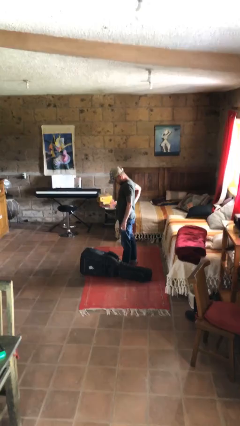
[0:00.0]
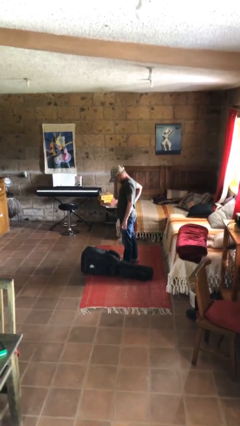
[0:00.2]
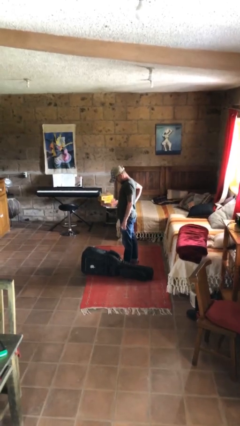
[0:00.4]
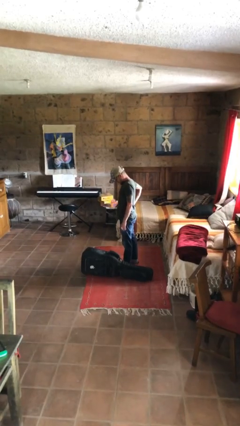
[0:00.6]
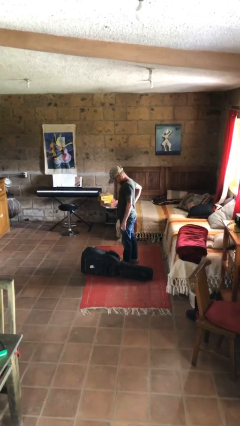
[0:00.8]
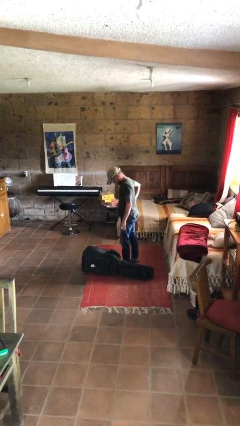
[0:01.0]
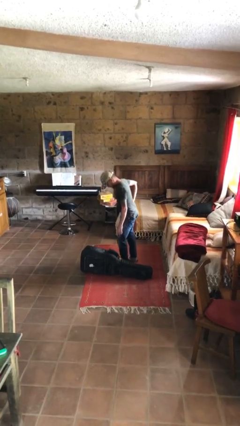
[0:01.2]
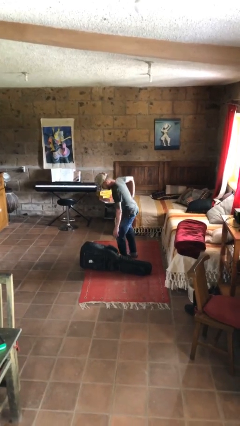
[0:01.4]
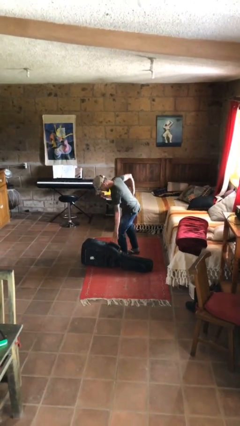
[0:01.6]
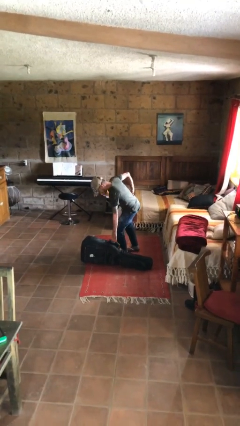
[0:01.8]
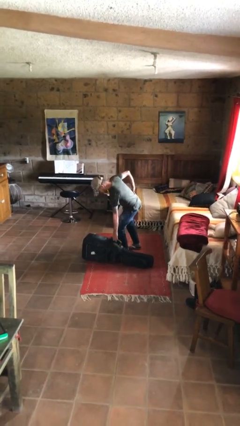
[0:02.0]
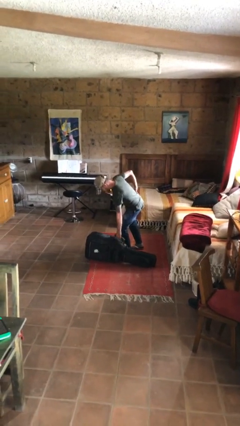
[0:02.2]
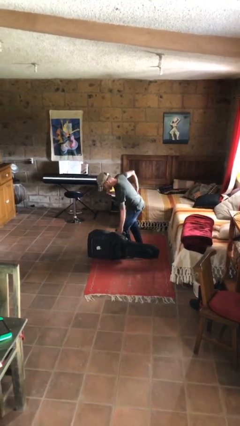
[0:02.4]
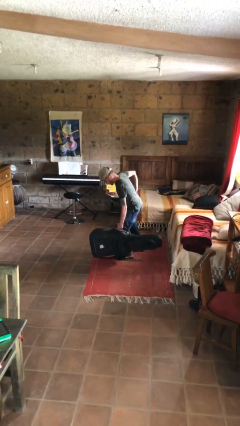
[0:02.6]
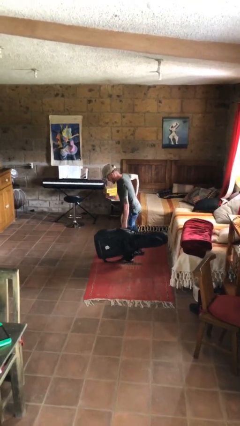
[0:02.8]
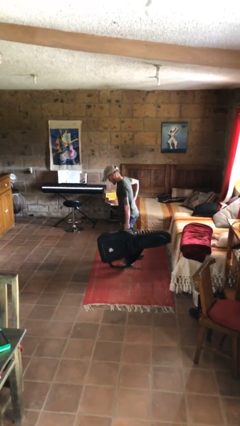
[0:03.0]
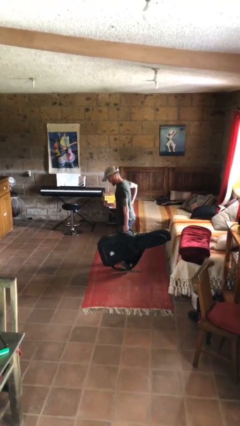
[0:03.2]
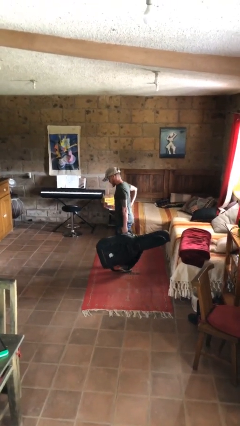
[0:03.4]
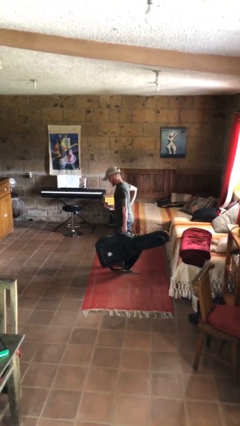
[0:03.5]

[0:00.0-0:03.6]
person picks up object from floor

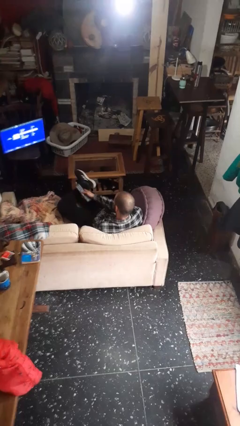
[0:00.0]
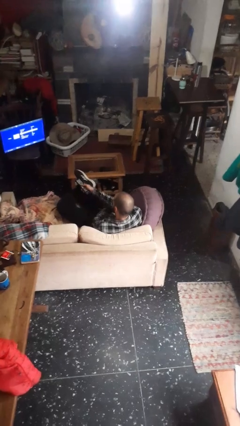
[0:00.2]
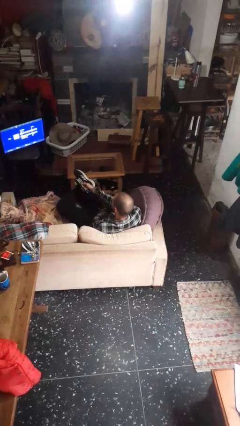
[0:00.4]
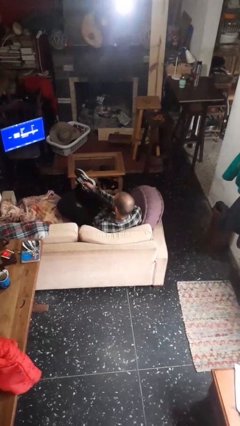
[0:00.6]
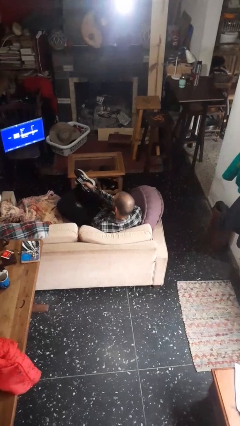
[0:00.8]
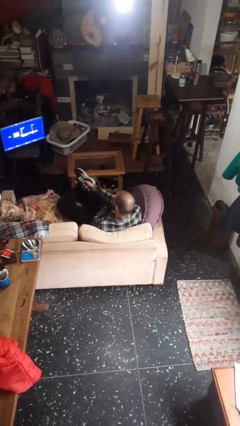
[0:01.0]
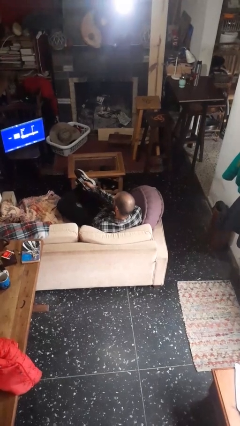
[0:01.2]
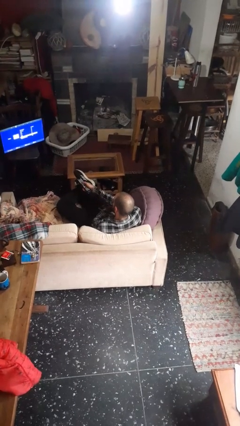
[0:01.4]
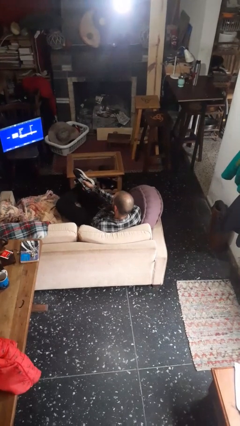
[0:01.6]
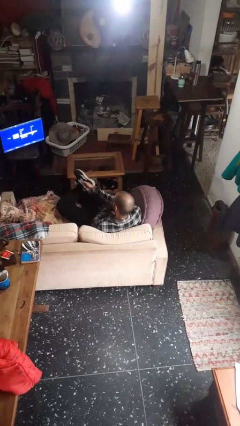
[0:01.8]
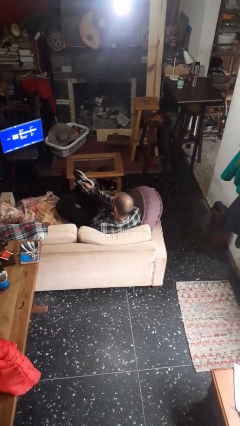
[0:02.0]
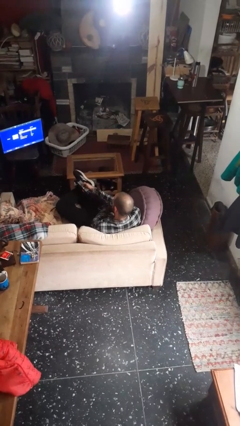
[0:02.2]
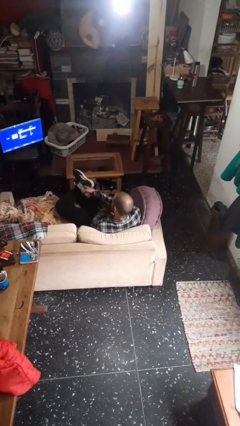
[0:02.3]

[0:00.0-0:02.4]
person uses television remote

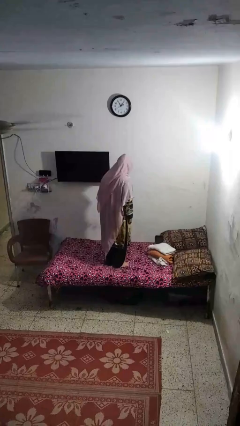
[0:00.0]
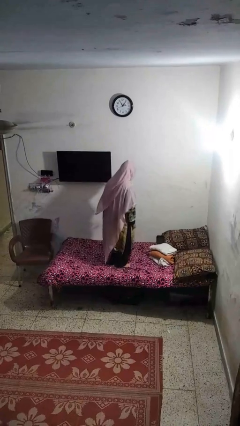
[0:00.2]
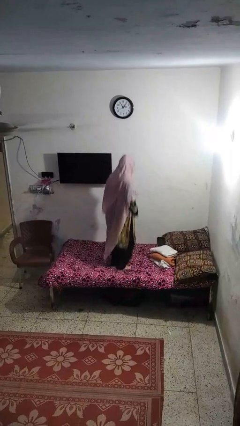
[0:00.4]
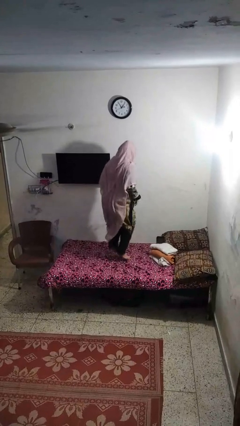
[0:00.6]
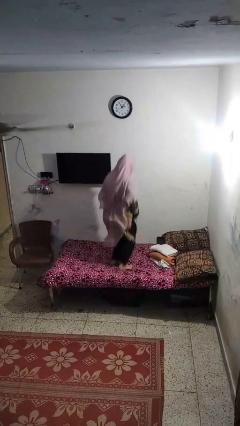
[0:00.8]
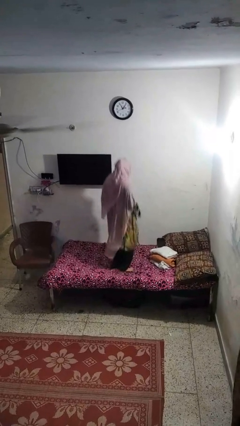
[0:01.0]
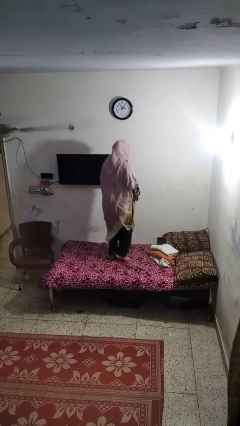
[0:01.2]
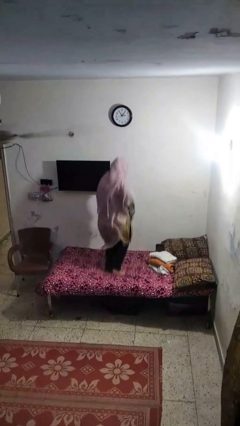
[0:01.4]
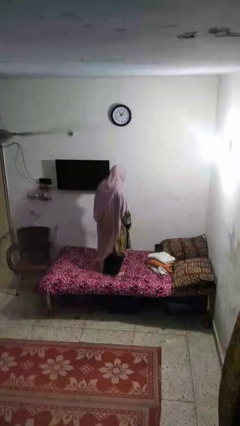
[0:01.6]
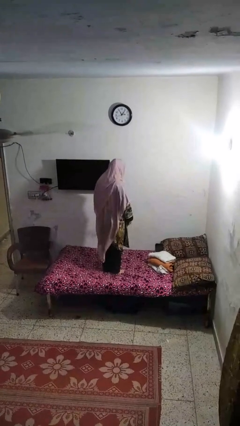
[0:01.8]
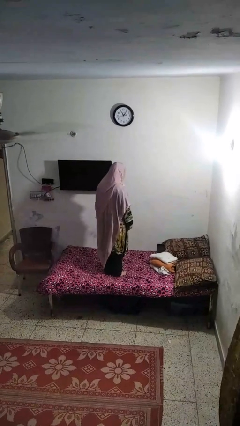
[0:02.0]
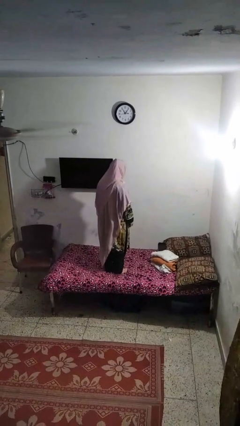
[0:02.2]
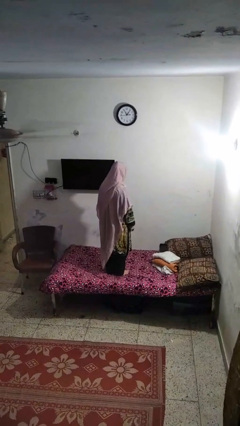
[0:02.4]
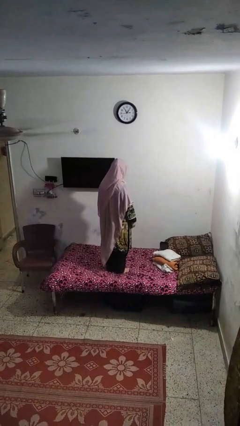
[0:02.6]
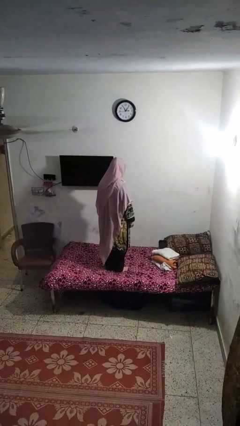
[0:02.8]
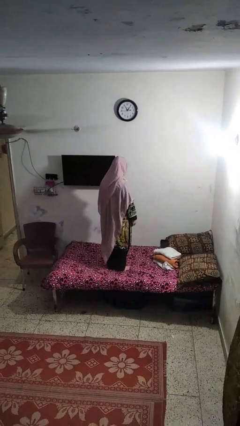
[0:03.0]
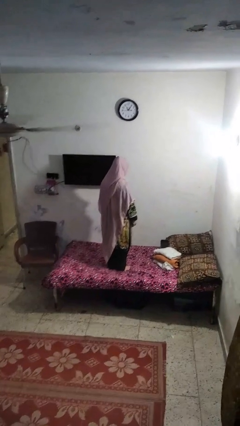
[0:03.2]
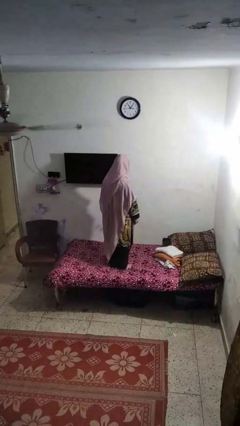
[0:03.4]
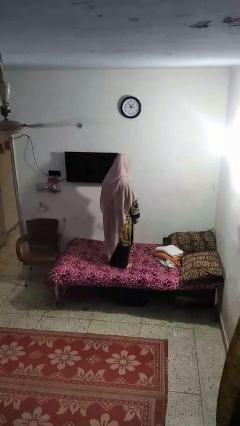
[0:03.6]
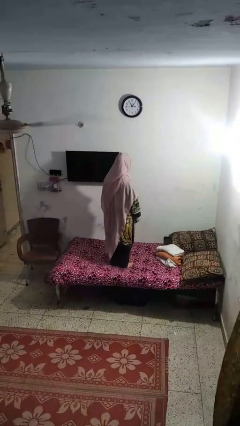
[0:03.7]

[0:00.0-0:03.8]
person jumps on bed

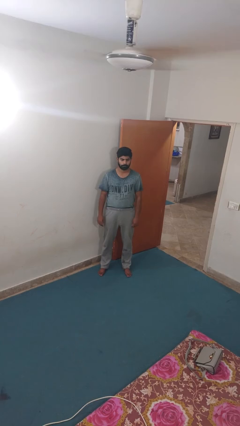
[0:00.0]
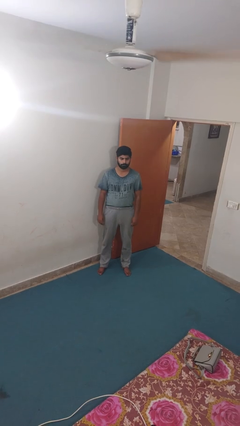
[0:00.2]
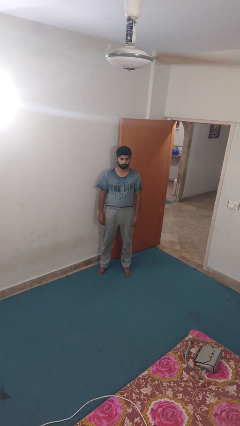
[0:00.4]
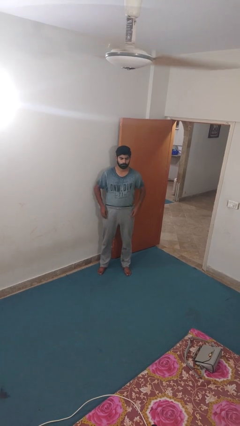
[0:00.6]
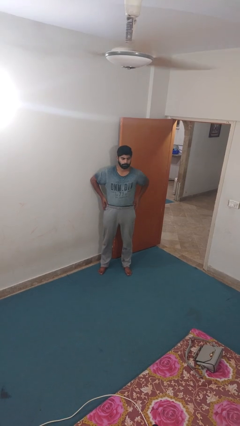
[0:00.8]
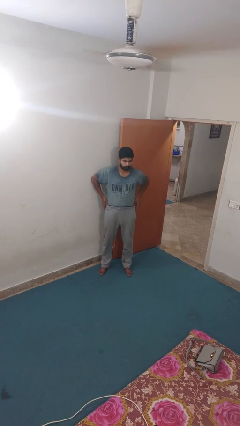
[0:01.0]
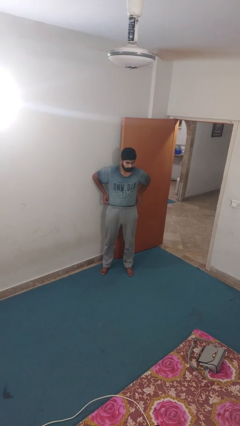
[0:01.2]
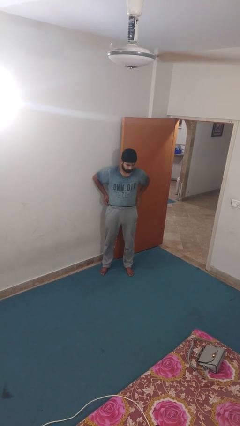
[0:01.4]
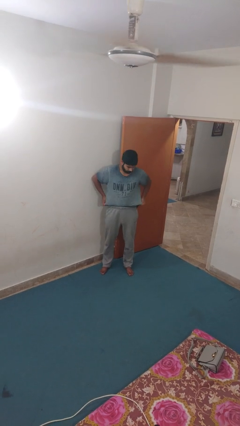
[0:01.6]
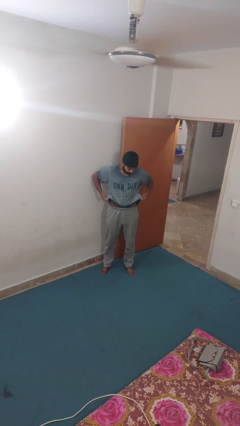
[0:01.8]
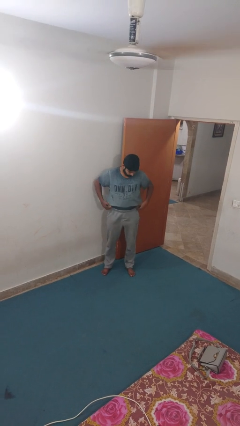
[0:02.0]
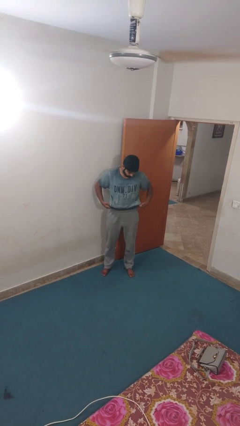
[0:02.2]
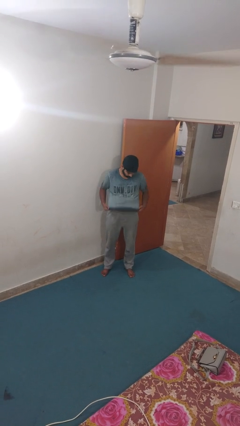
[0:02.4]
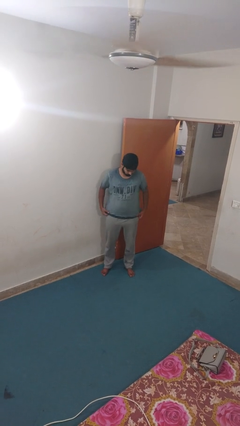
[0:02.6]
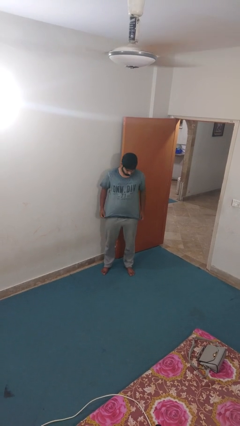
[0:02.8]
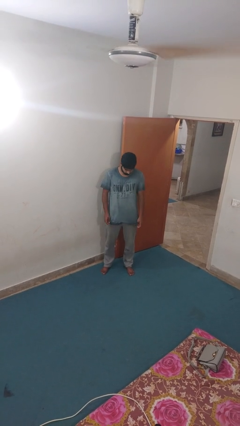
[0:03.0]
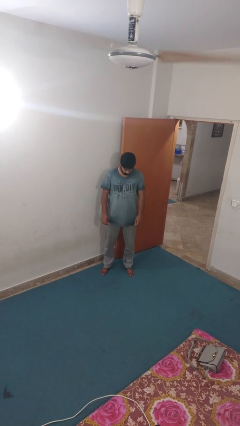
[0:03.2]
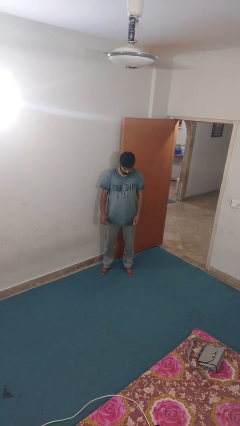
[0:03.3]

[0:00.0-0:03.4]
person untucks shirt

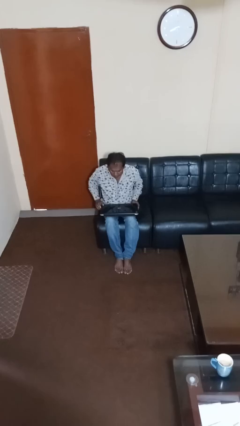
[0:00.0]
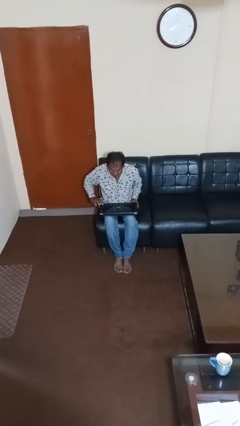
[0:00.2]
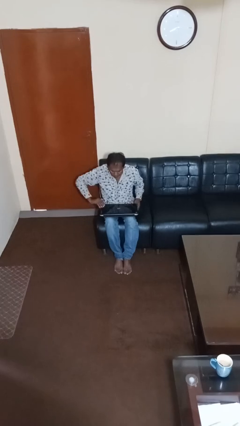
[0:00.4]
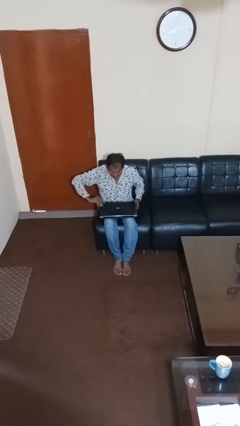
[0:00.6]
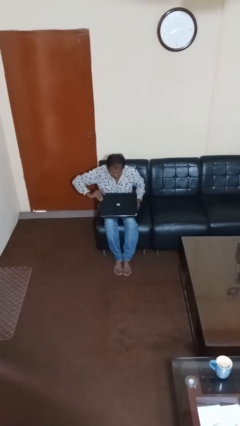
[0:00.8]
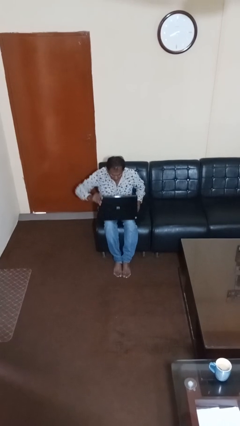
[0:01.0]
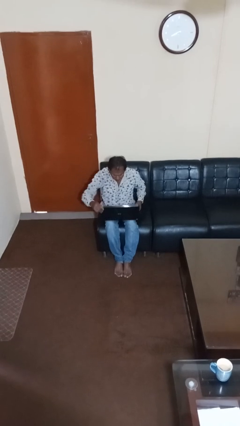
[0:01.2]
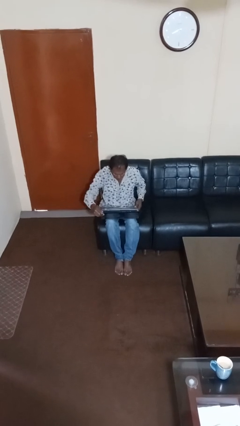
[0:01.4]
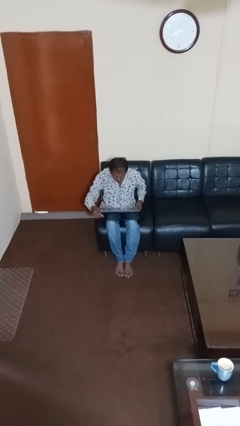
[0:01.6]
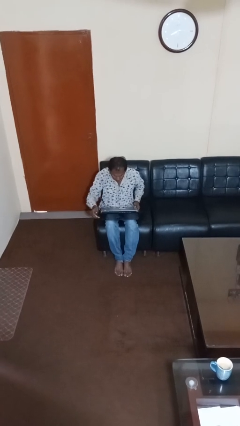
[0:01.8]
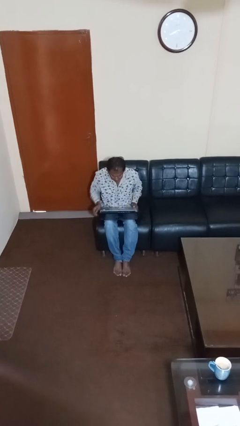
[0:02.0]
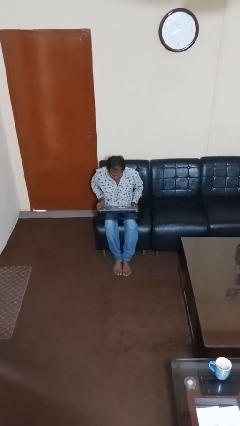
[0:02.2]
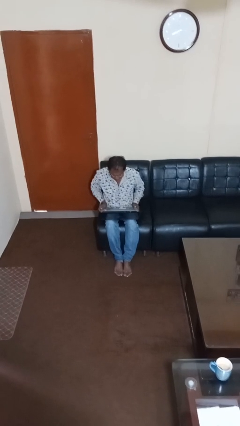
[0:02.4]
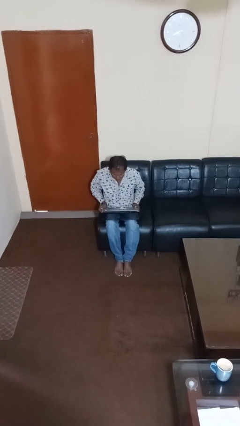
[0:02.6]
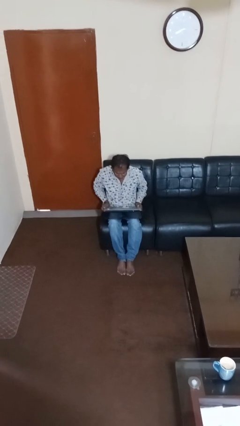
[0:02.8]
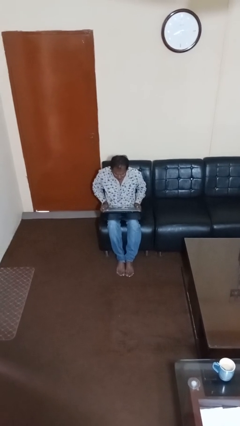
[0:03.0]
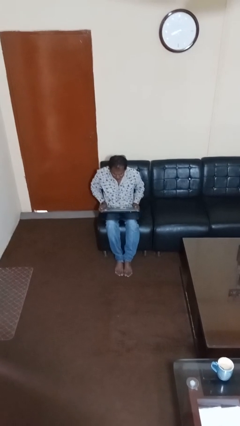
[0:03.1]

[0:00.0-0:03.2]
person opens laptop

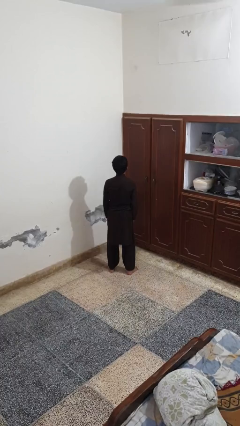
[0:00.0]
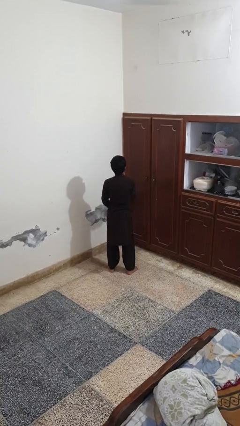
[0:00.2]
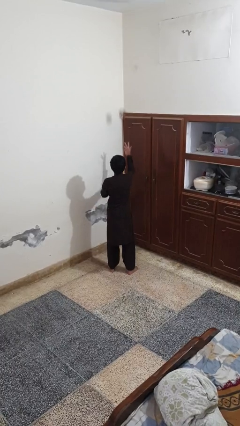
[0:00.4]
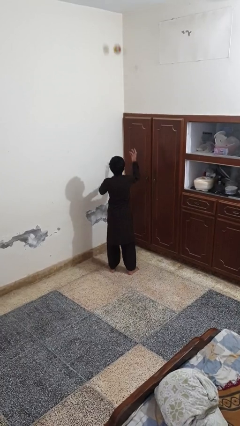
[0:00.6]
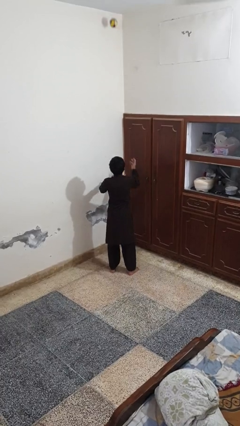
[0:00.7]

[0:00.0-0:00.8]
person drops object

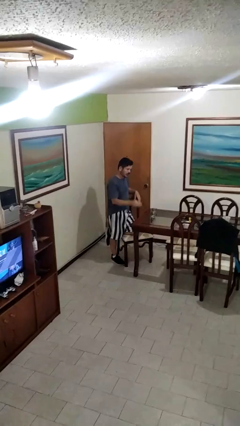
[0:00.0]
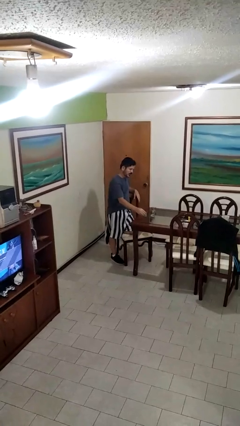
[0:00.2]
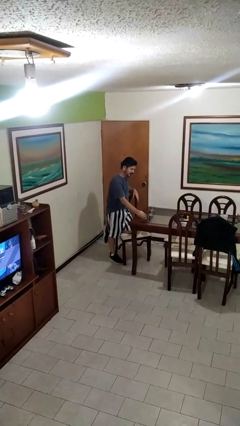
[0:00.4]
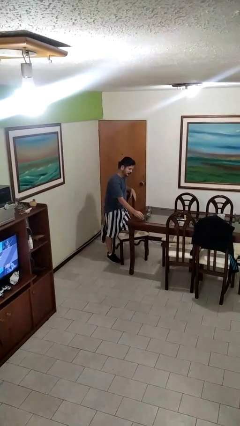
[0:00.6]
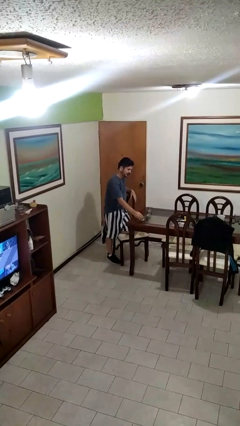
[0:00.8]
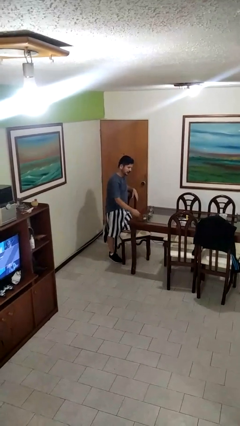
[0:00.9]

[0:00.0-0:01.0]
person puts down object on table
